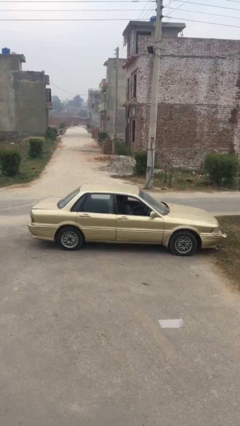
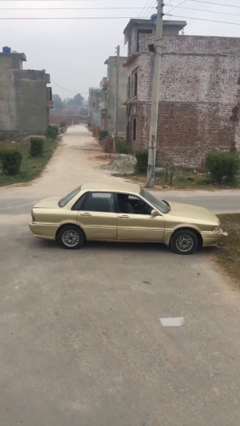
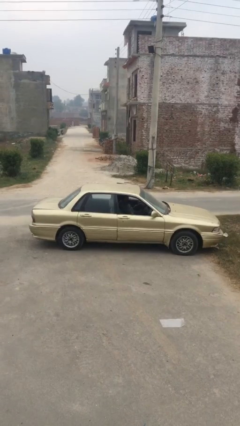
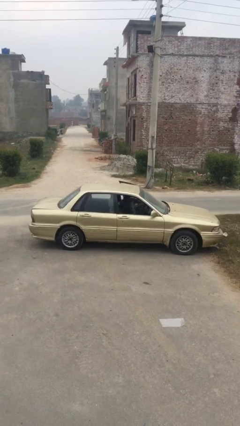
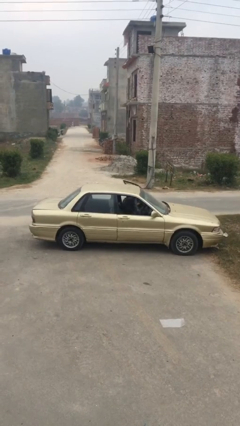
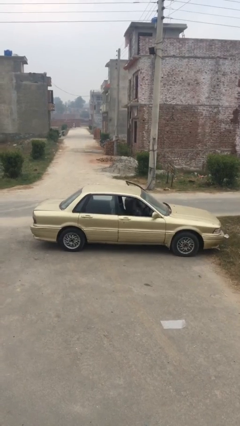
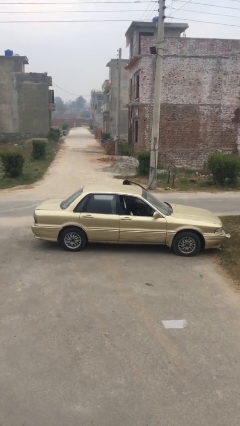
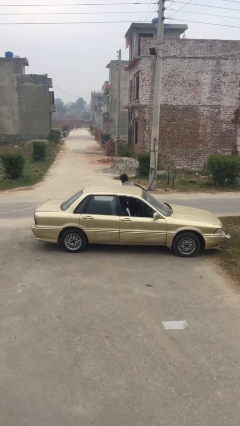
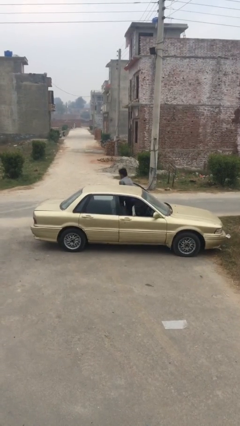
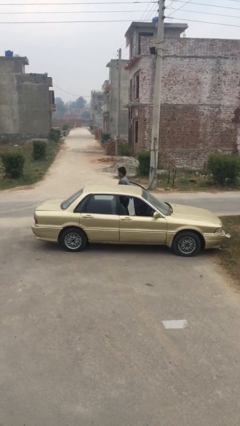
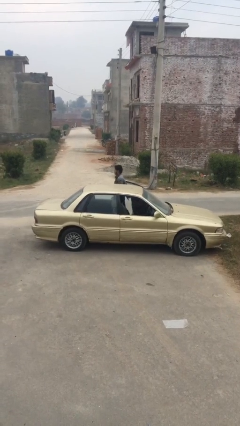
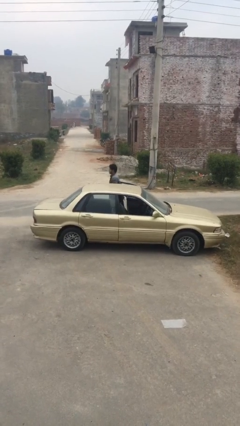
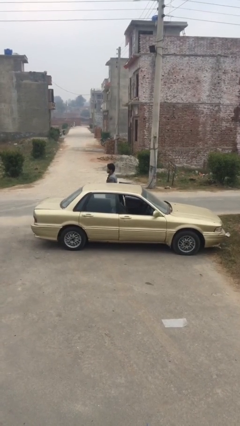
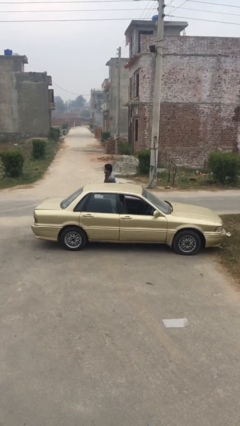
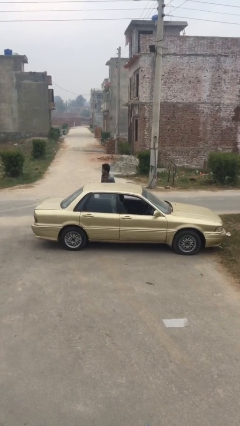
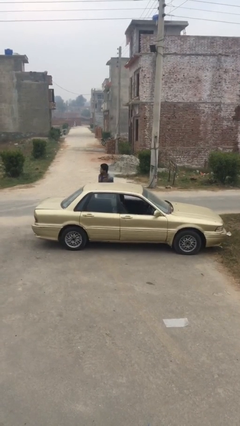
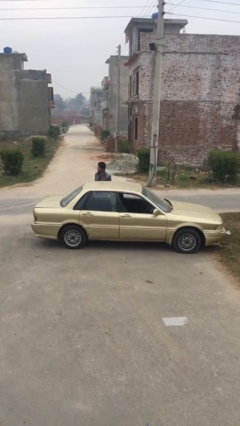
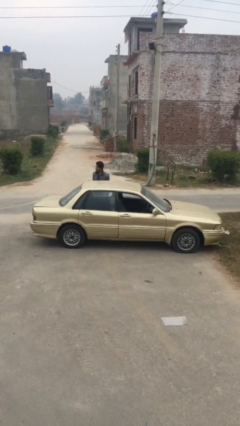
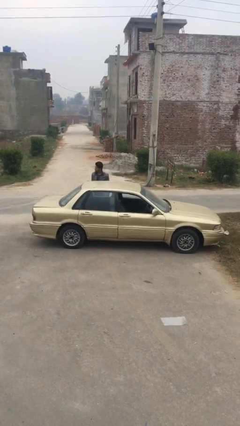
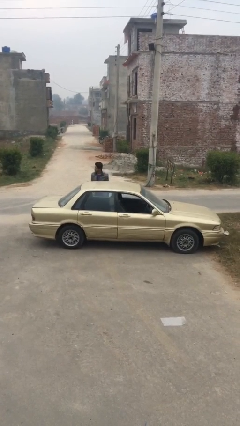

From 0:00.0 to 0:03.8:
car drops off person

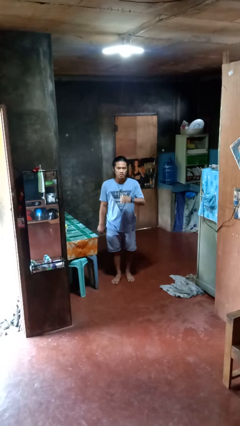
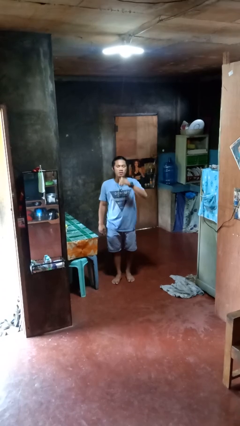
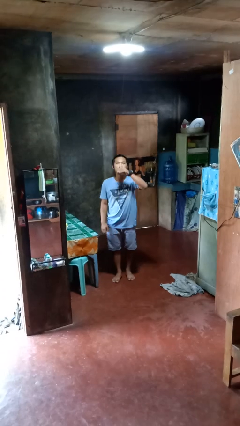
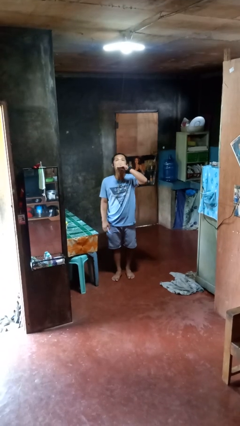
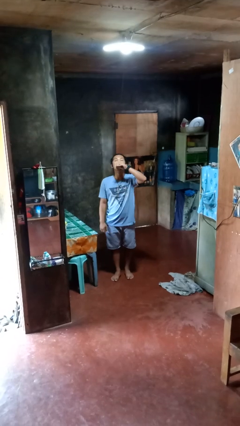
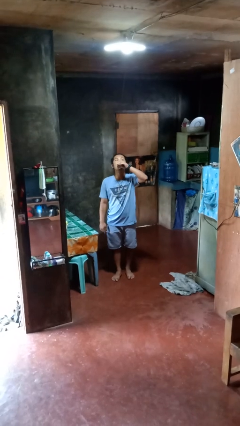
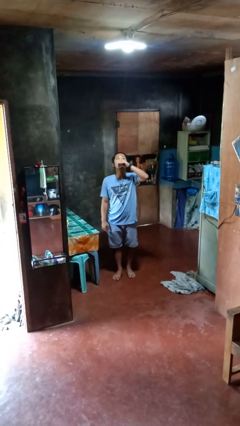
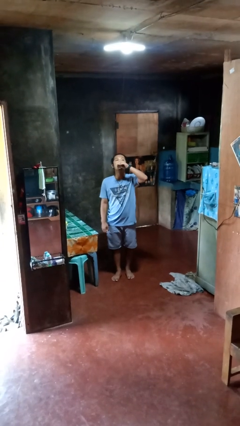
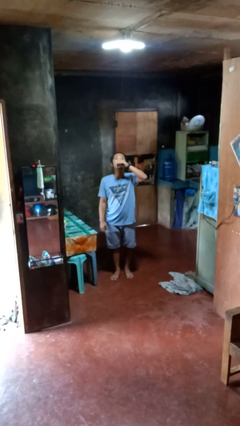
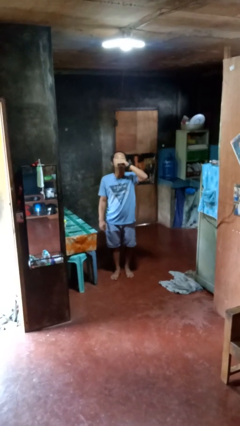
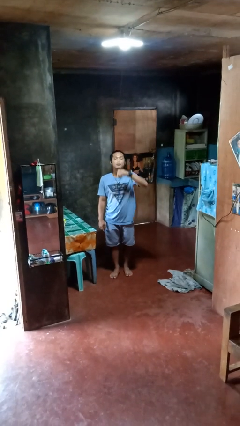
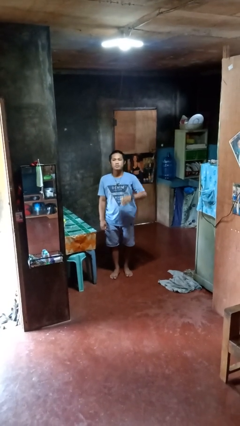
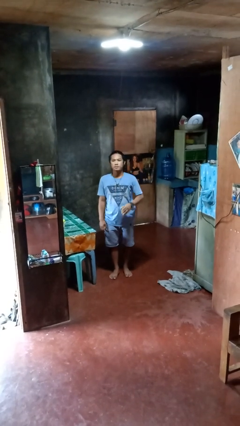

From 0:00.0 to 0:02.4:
person drinks from beverage can

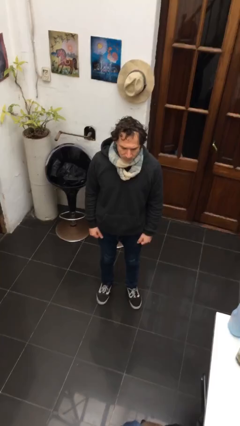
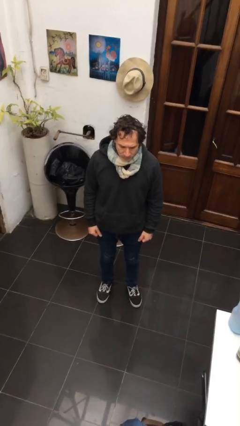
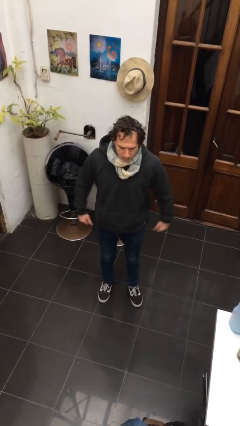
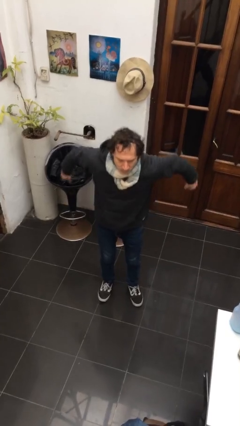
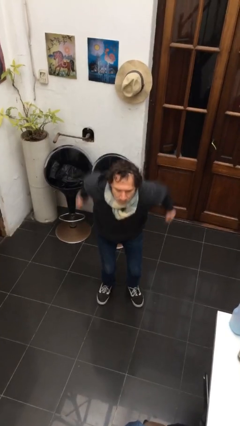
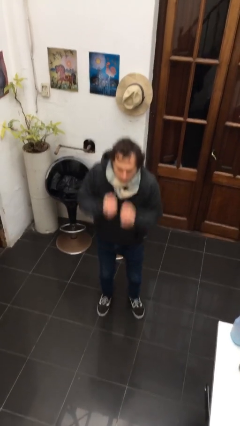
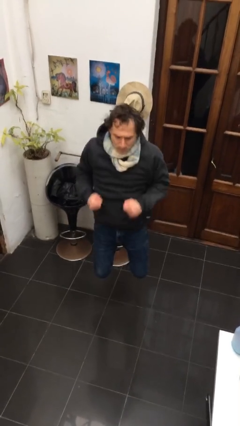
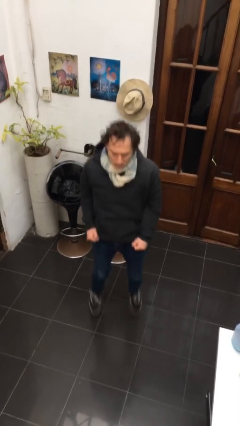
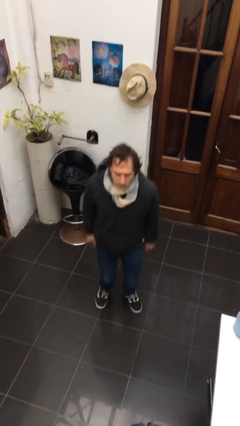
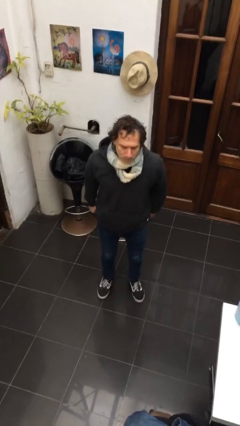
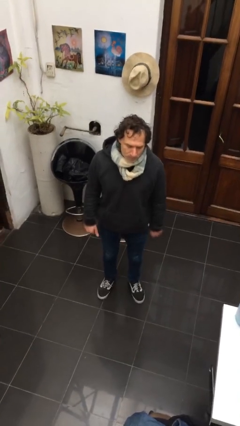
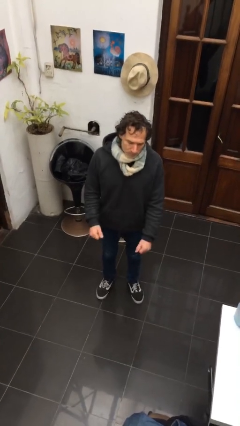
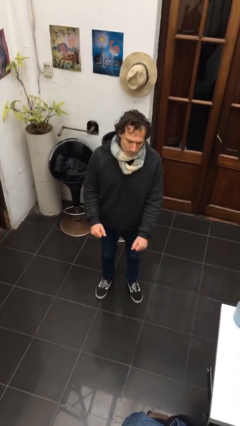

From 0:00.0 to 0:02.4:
person jumps

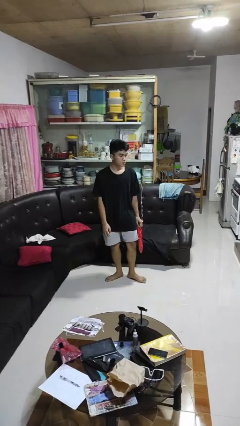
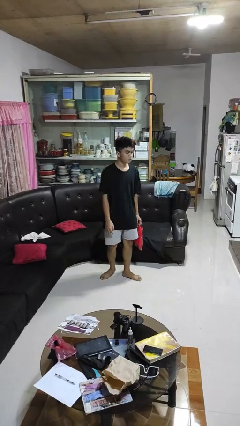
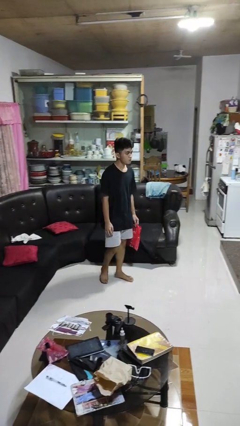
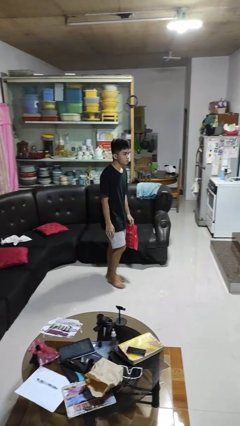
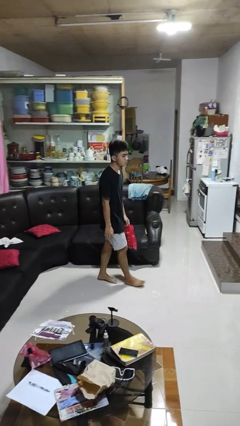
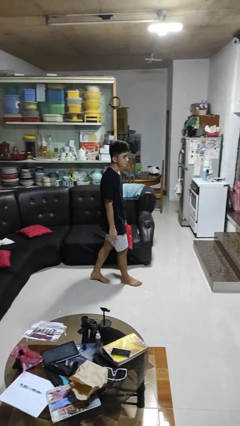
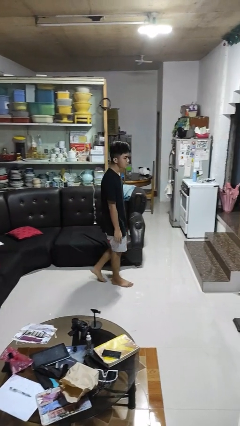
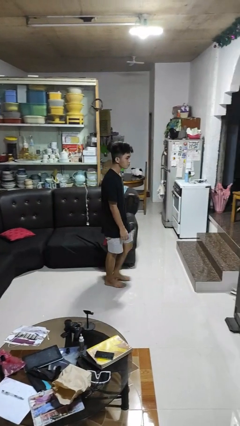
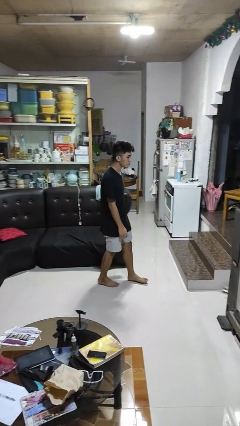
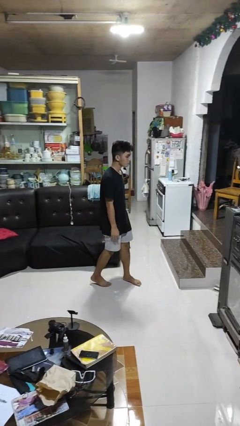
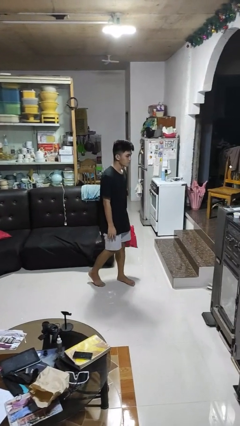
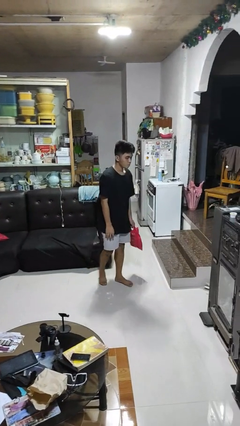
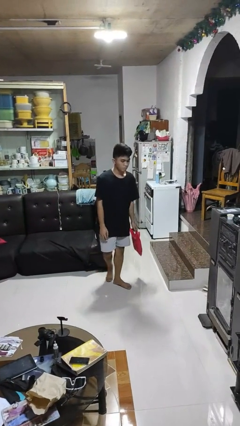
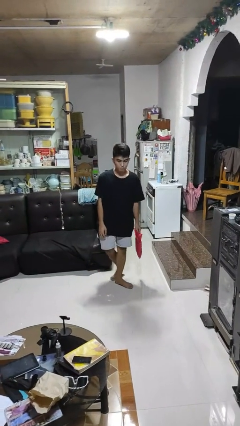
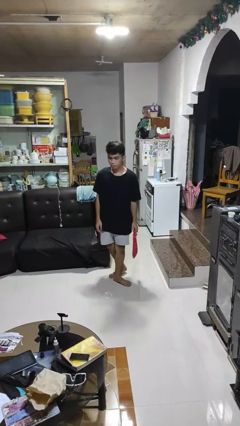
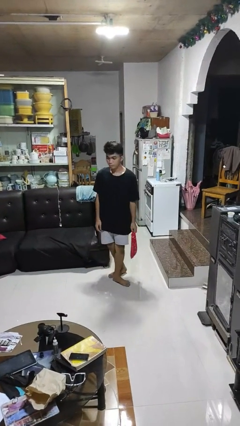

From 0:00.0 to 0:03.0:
person carries groceries

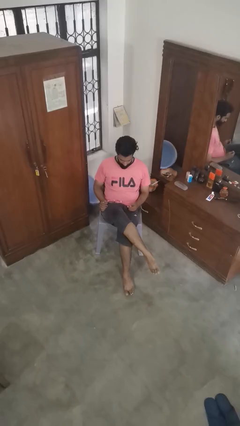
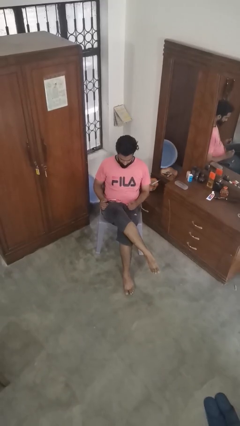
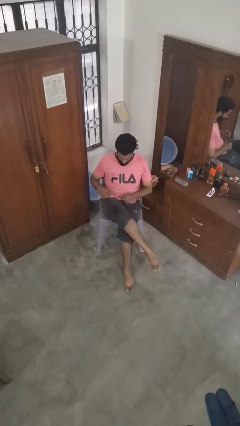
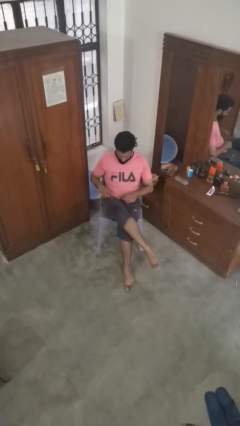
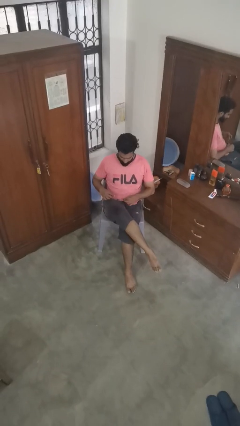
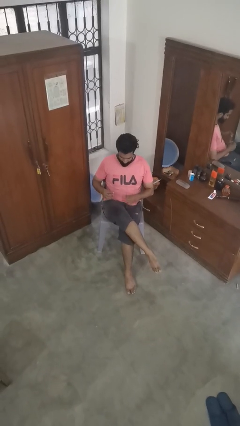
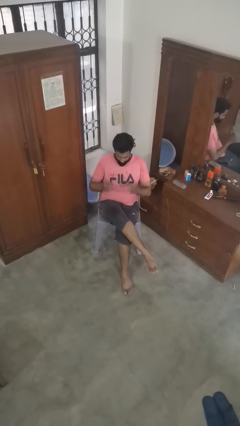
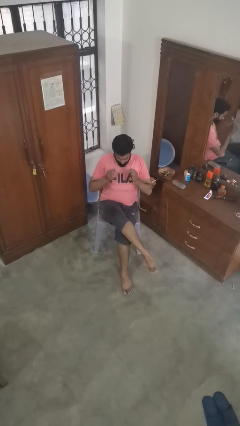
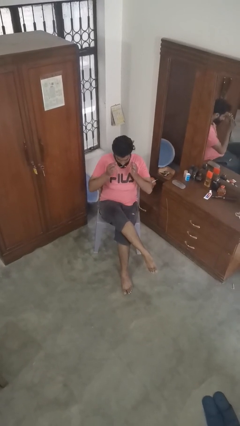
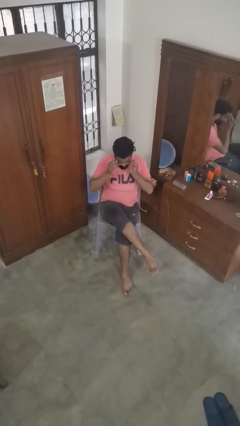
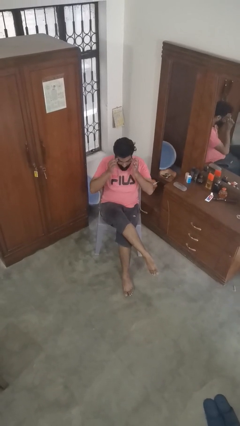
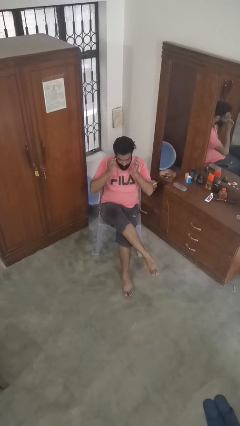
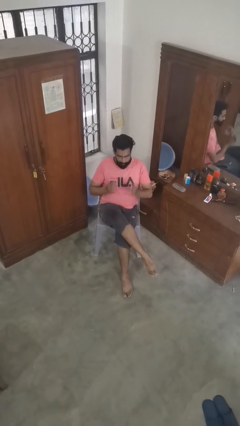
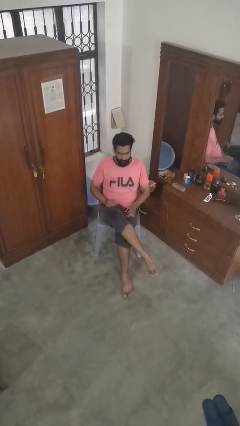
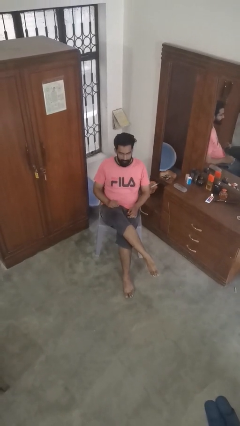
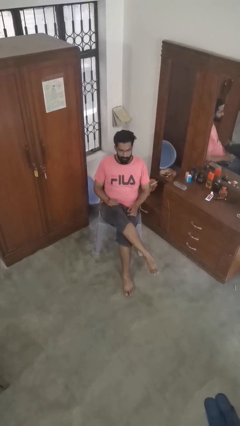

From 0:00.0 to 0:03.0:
person puts on glasses

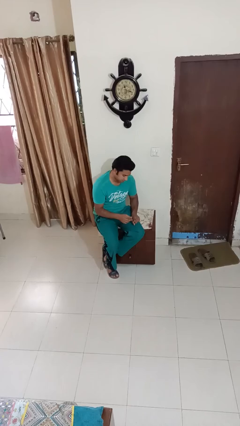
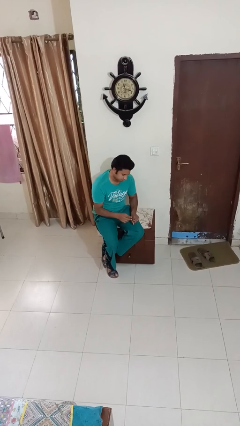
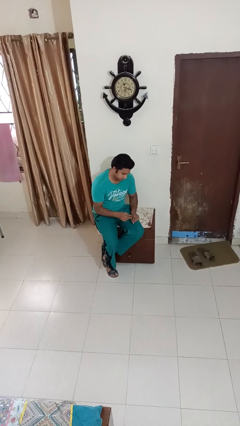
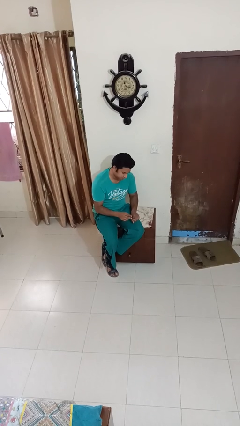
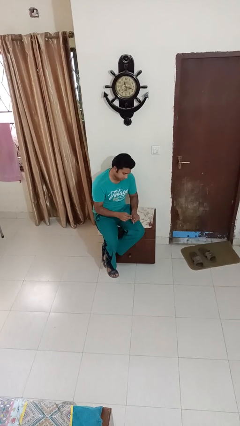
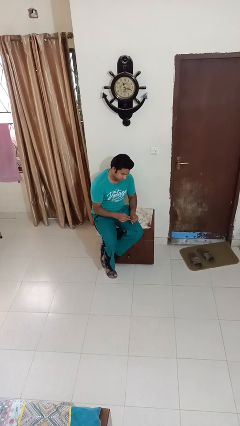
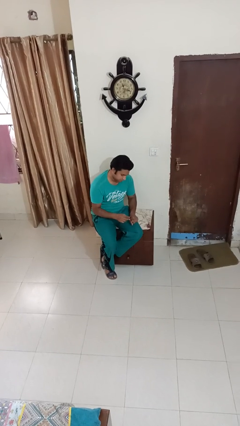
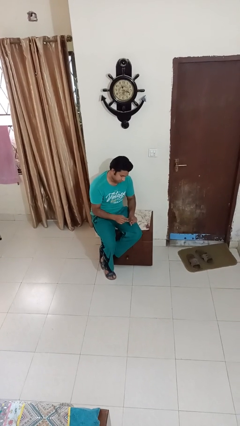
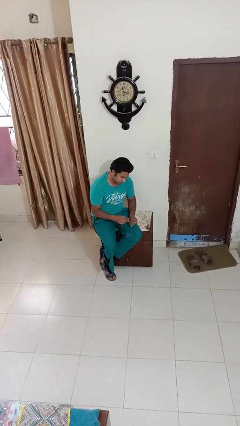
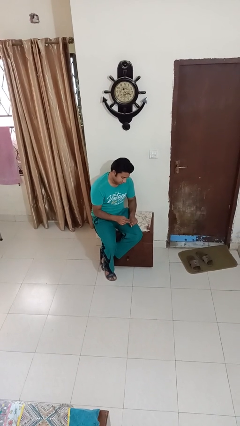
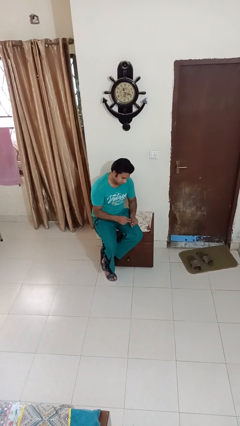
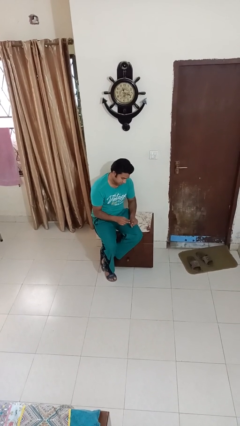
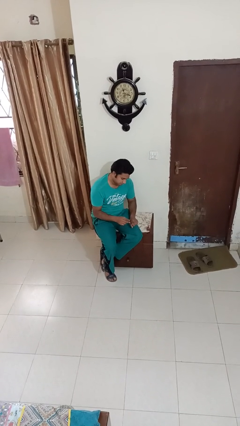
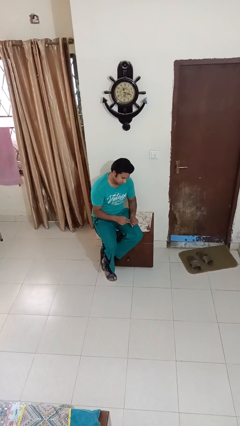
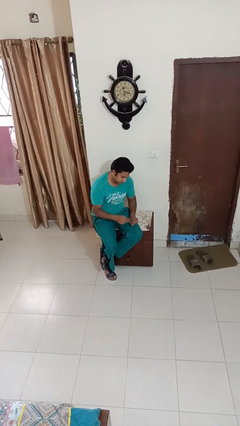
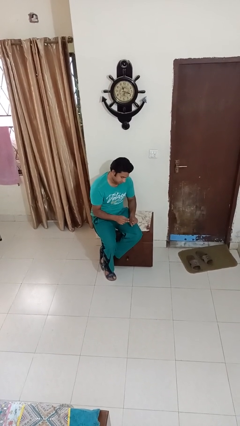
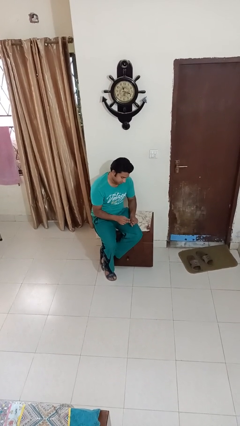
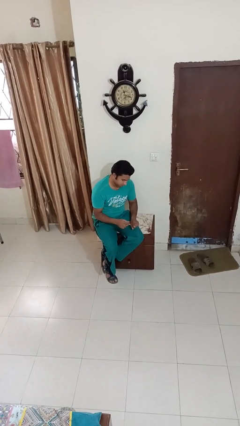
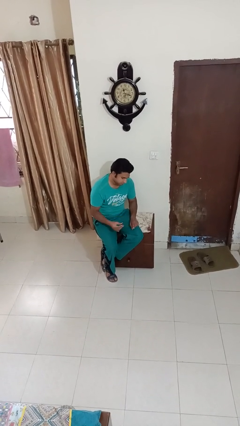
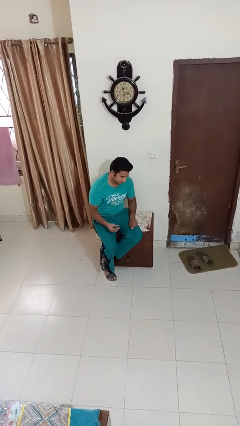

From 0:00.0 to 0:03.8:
person paints fingernails
